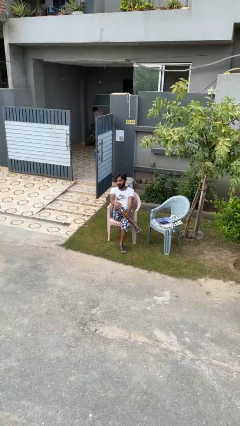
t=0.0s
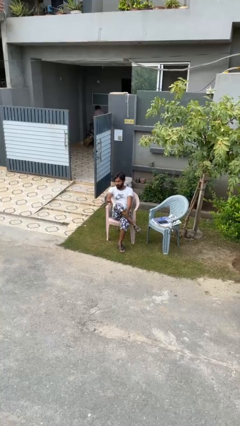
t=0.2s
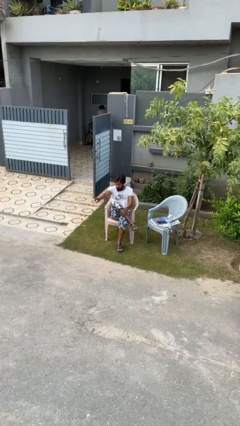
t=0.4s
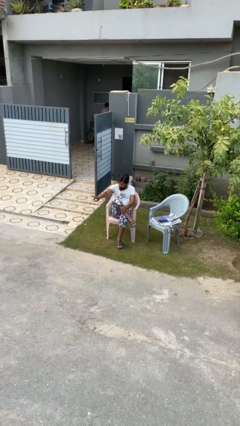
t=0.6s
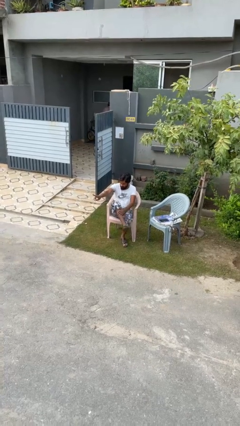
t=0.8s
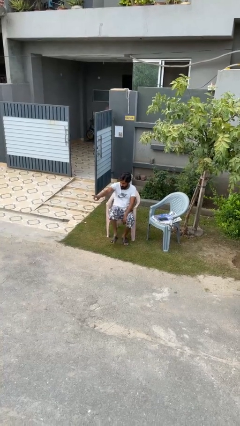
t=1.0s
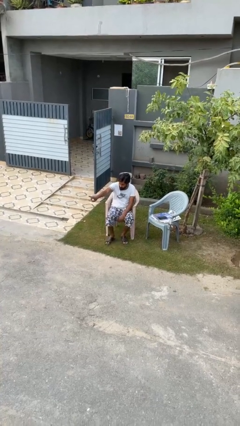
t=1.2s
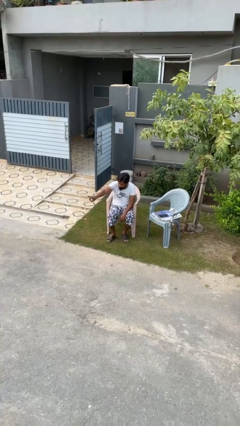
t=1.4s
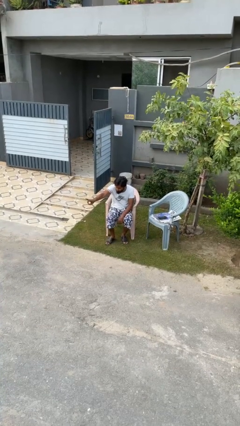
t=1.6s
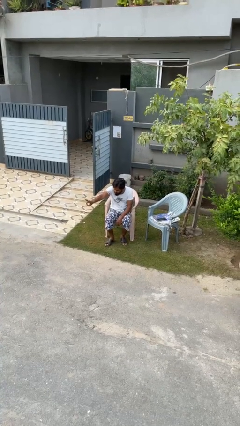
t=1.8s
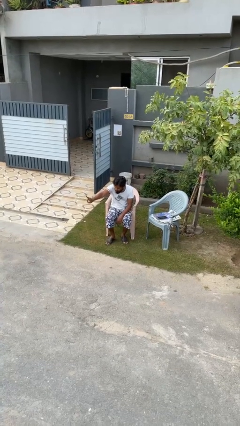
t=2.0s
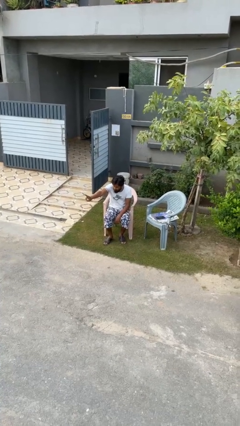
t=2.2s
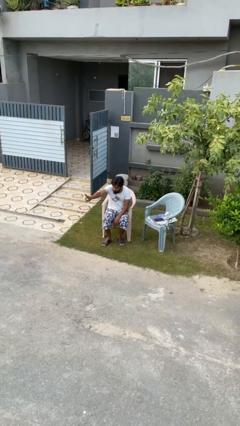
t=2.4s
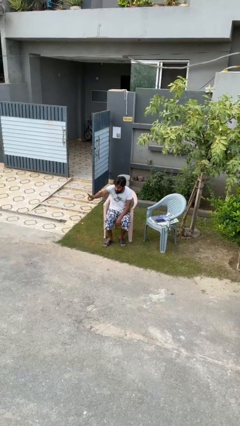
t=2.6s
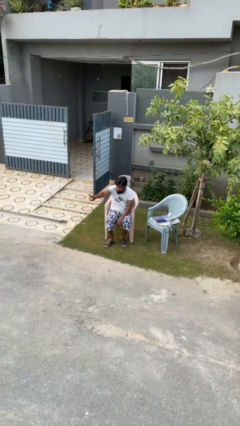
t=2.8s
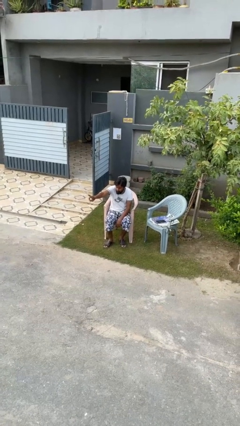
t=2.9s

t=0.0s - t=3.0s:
person gestures peace

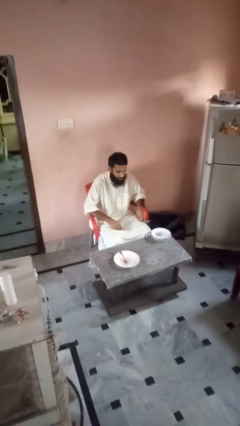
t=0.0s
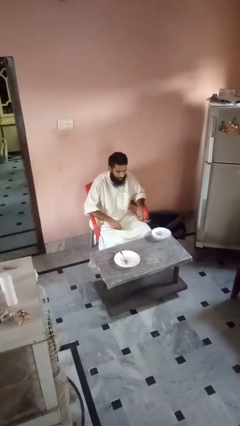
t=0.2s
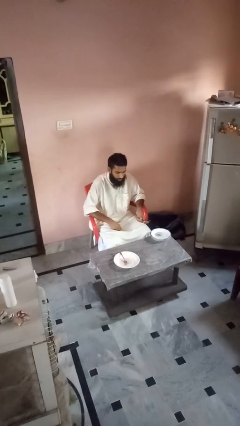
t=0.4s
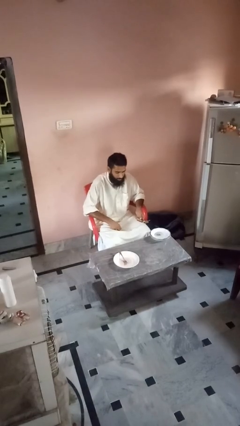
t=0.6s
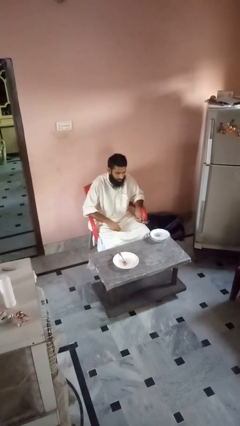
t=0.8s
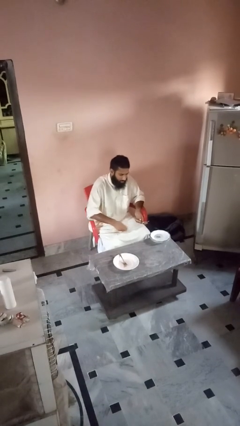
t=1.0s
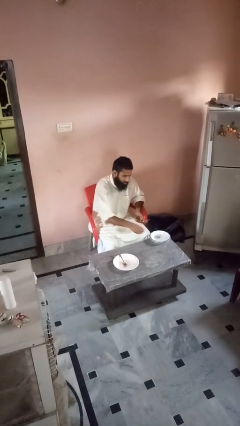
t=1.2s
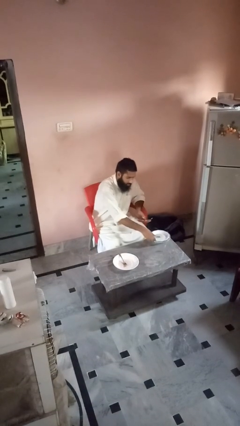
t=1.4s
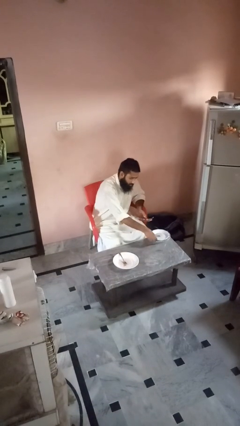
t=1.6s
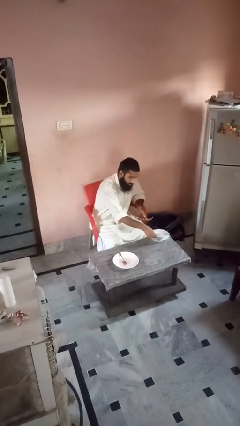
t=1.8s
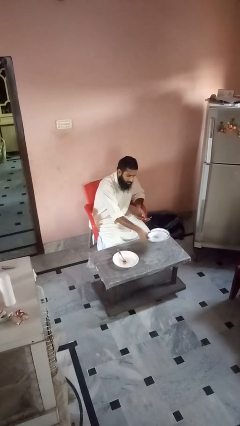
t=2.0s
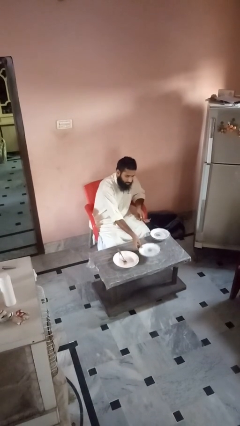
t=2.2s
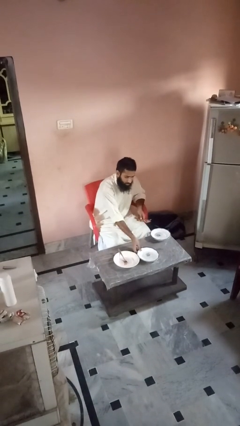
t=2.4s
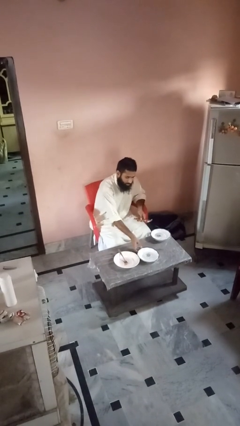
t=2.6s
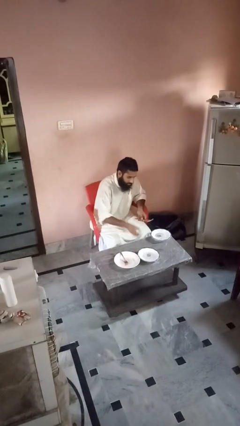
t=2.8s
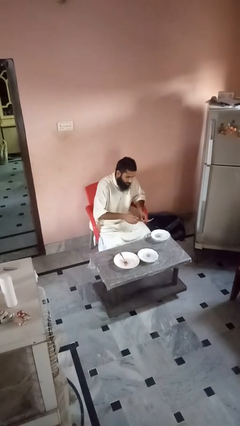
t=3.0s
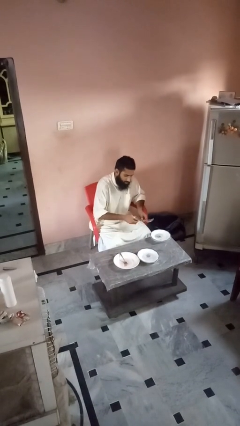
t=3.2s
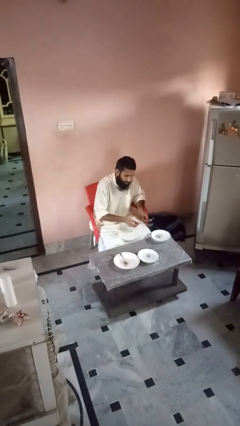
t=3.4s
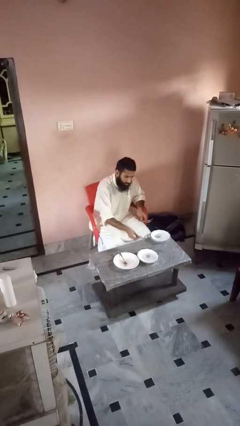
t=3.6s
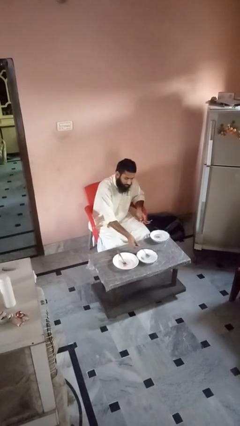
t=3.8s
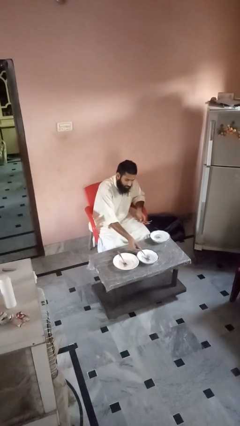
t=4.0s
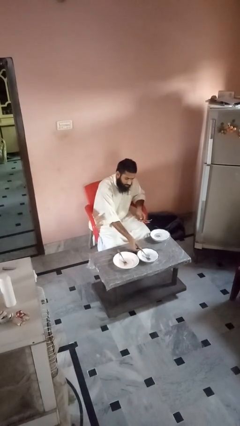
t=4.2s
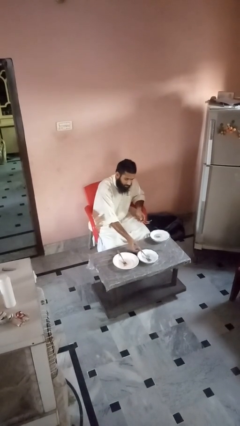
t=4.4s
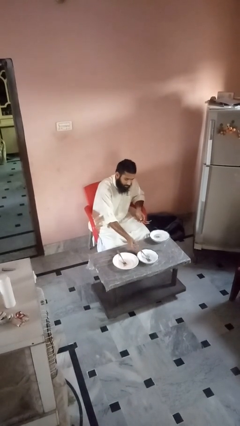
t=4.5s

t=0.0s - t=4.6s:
person sets table

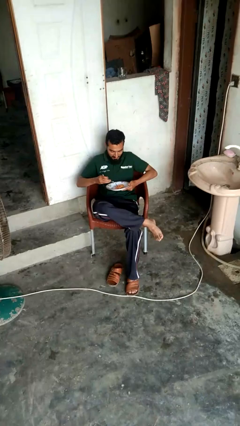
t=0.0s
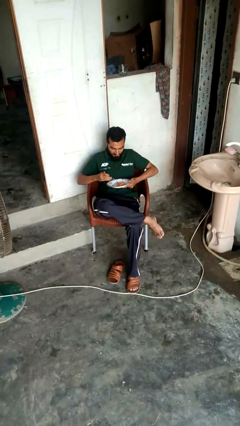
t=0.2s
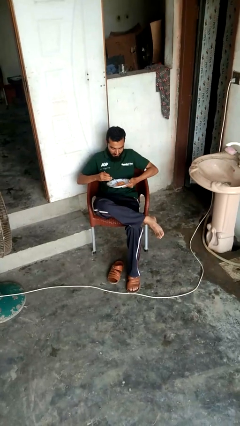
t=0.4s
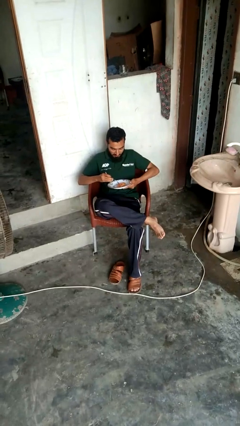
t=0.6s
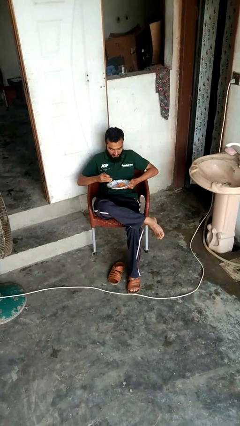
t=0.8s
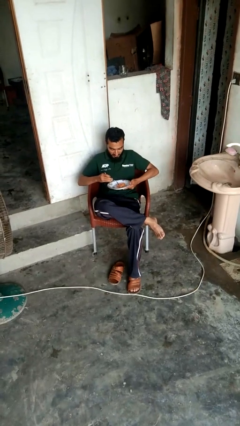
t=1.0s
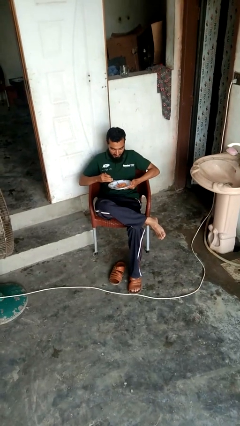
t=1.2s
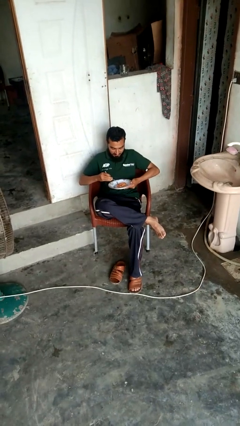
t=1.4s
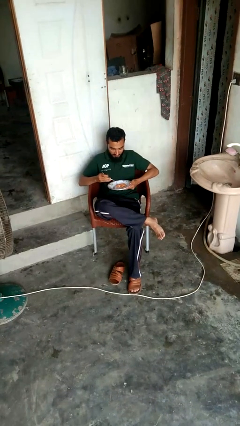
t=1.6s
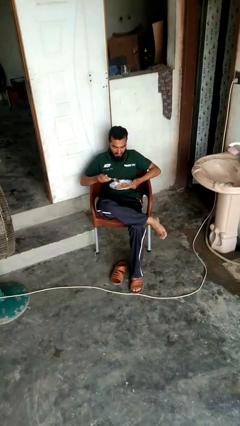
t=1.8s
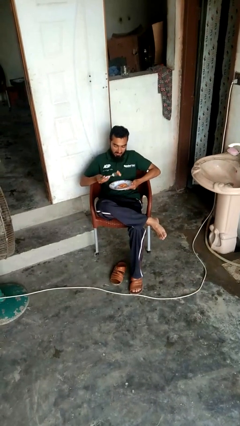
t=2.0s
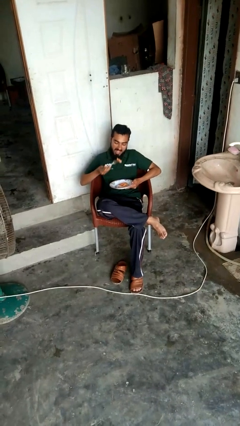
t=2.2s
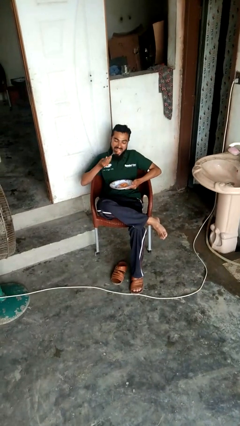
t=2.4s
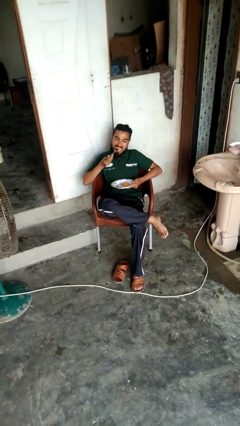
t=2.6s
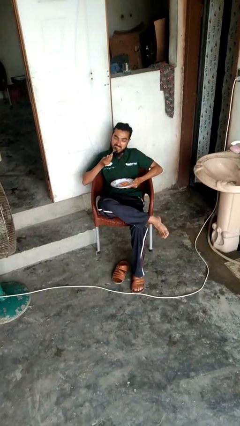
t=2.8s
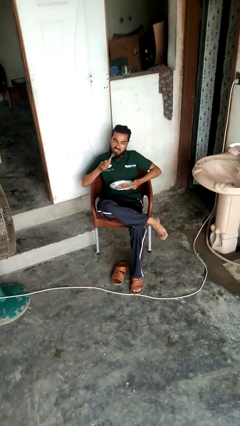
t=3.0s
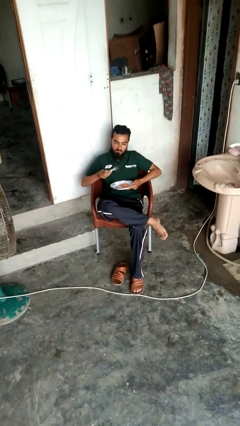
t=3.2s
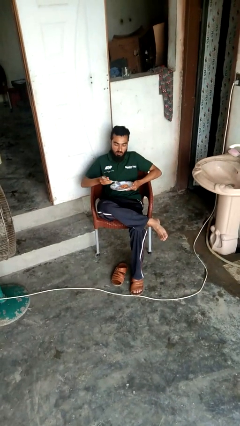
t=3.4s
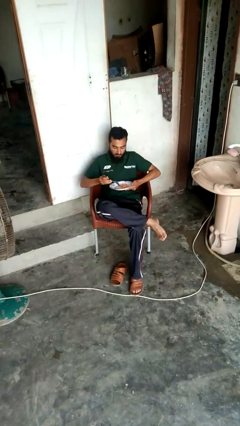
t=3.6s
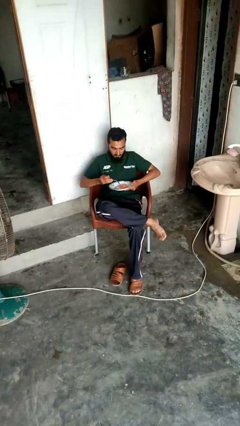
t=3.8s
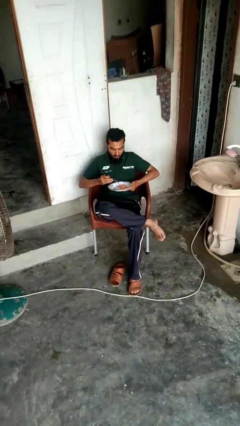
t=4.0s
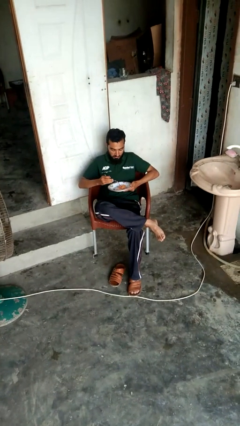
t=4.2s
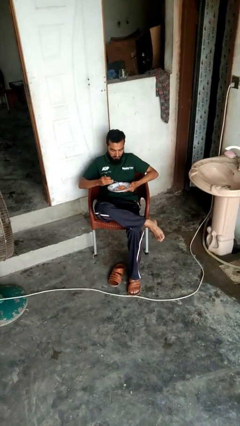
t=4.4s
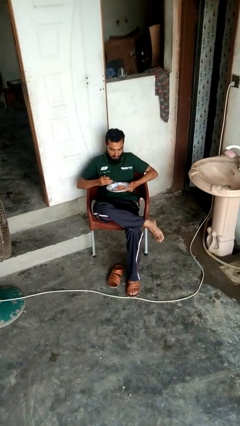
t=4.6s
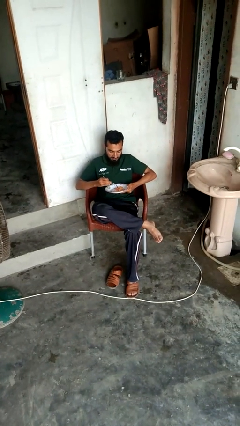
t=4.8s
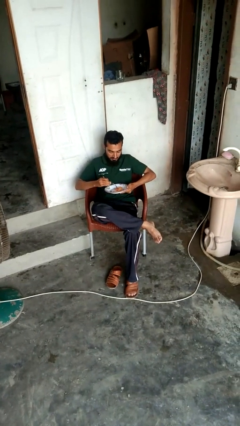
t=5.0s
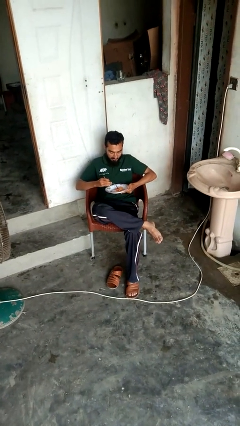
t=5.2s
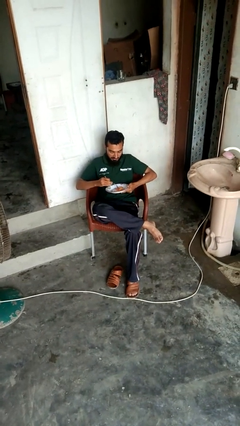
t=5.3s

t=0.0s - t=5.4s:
person eats with utensil

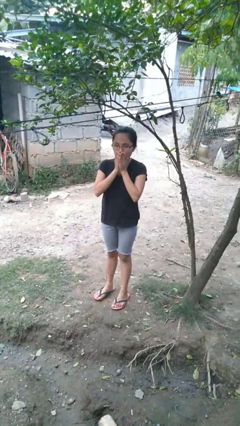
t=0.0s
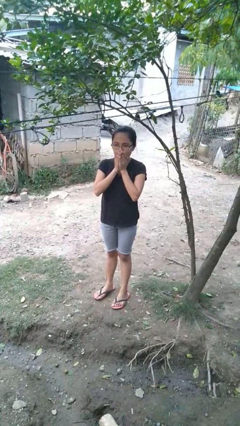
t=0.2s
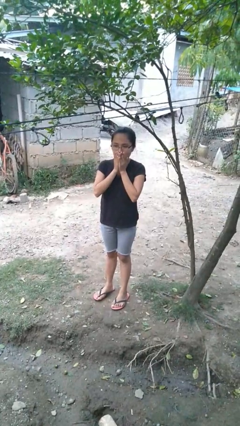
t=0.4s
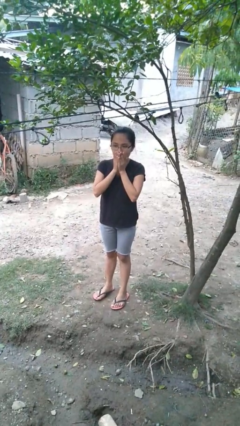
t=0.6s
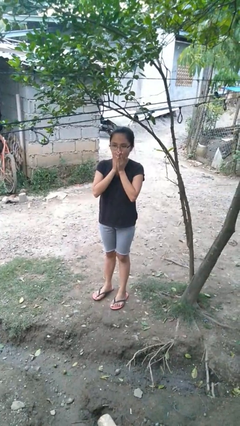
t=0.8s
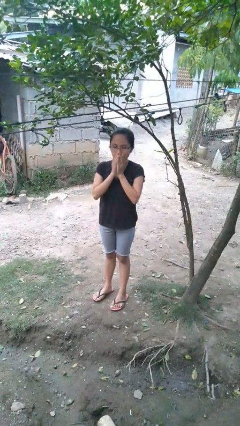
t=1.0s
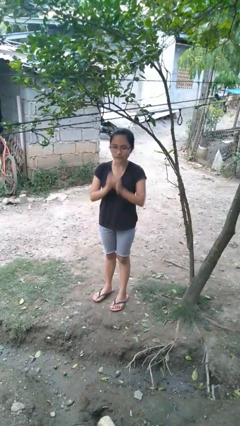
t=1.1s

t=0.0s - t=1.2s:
person blows into hands

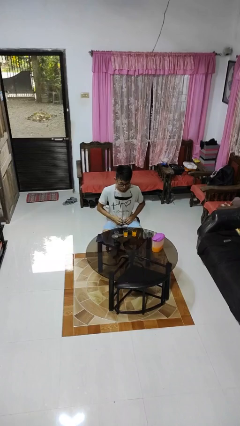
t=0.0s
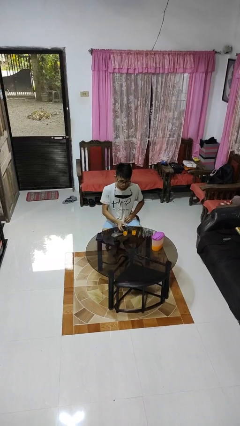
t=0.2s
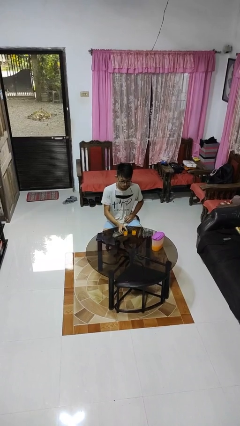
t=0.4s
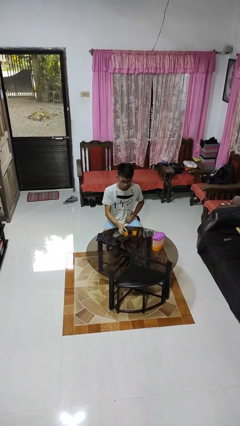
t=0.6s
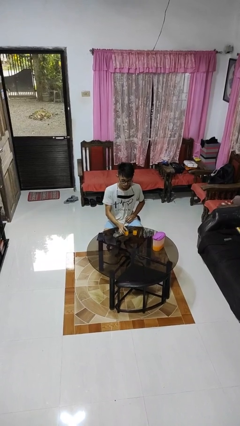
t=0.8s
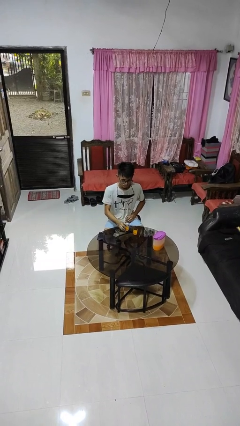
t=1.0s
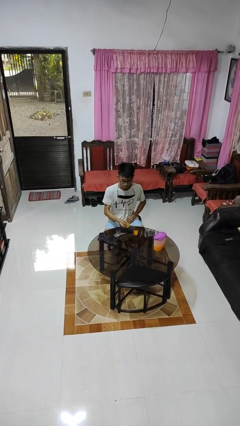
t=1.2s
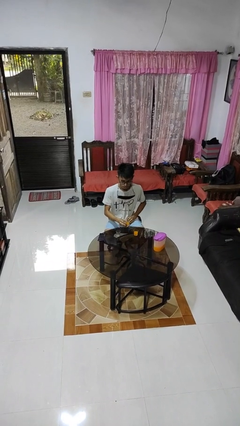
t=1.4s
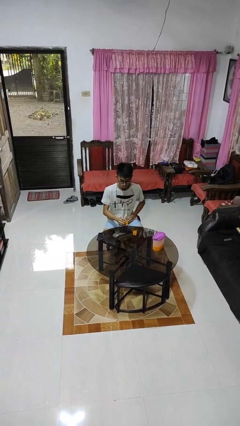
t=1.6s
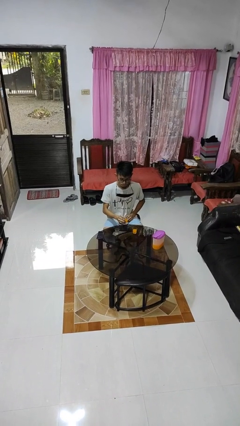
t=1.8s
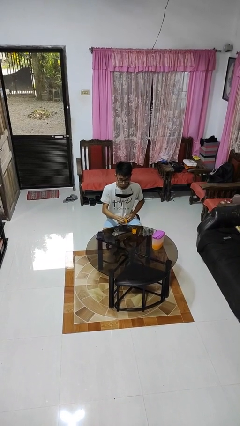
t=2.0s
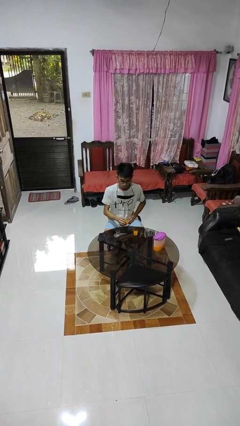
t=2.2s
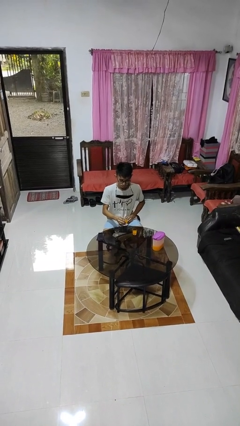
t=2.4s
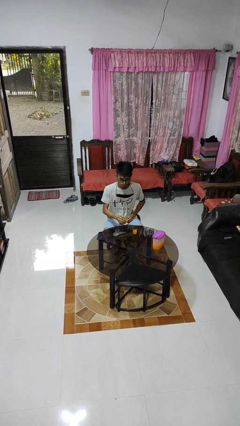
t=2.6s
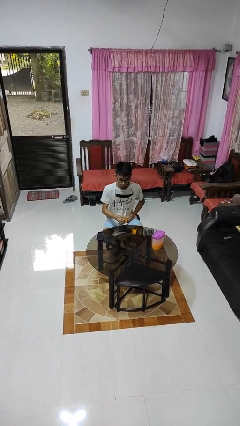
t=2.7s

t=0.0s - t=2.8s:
person picks up object from table

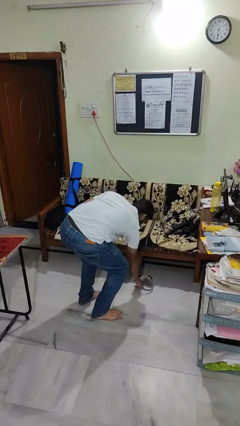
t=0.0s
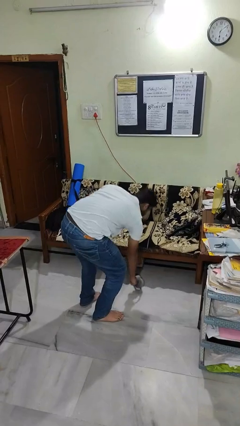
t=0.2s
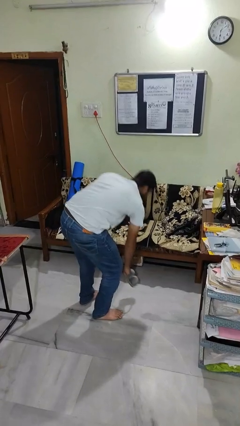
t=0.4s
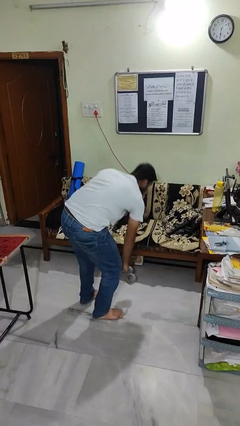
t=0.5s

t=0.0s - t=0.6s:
person throws object into air
